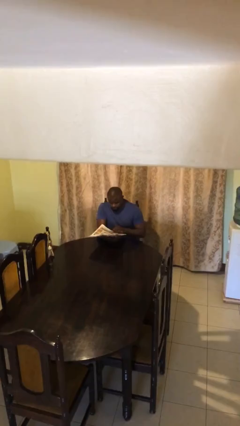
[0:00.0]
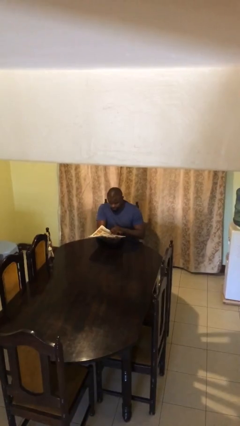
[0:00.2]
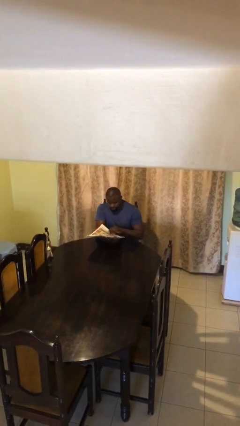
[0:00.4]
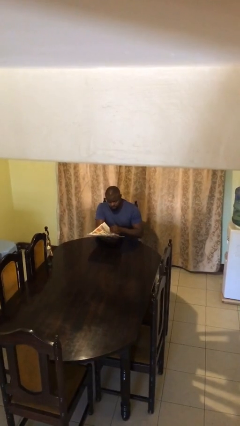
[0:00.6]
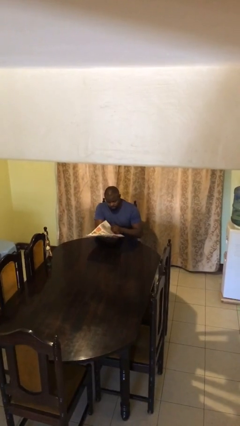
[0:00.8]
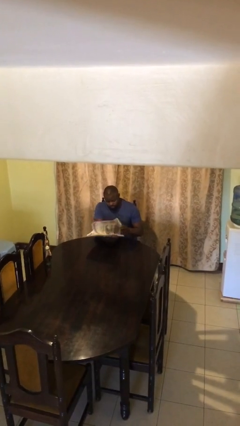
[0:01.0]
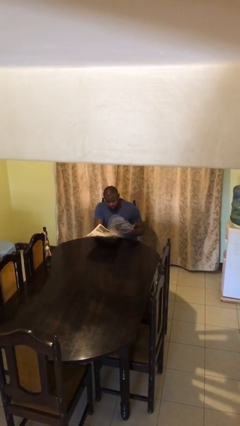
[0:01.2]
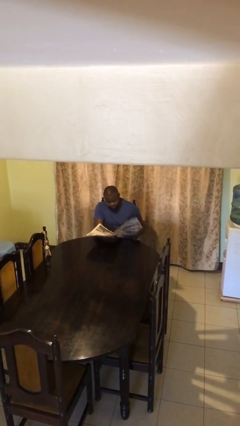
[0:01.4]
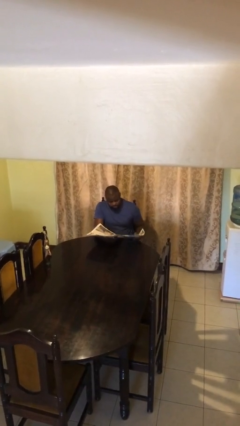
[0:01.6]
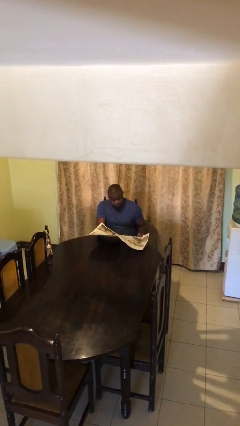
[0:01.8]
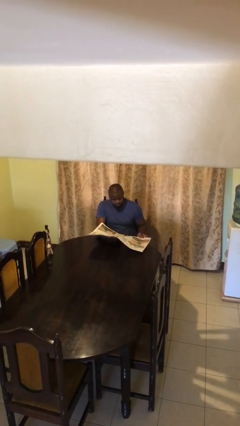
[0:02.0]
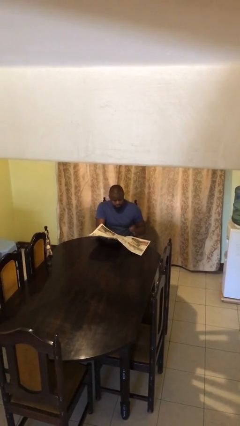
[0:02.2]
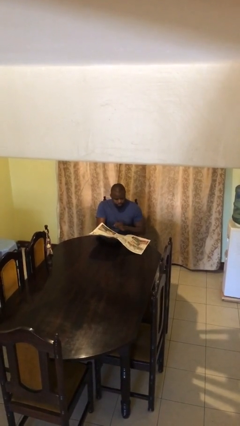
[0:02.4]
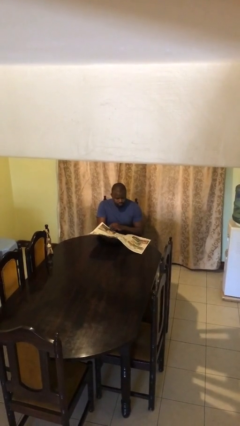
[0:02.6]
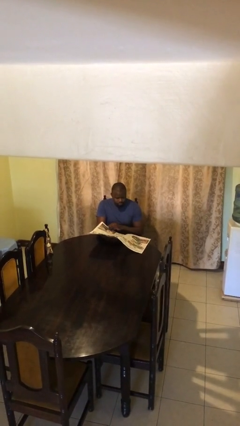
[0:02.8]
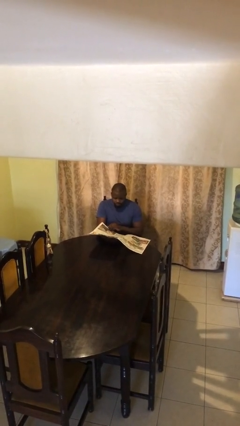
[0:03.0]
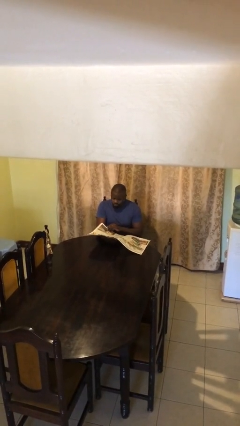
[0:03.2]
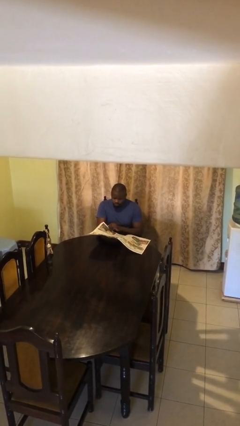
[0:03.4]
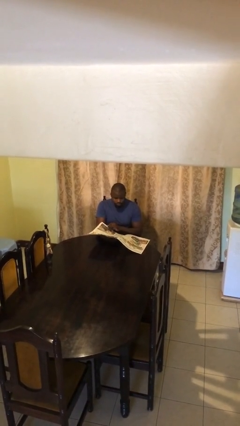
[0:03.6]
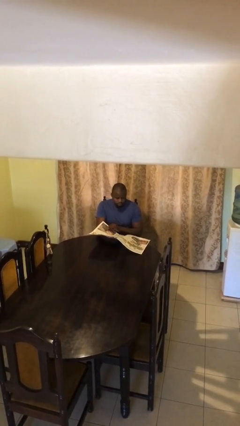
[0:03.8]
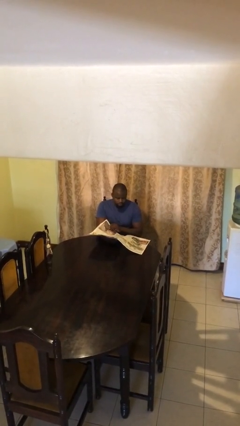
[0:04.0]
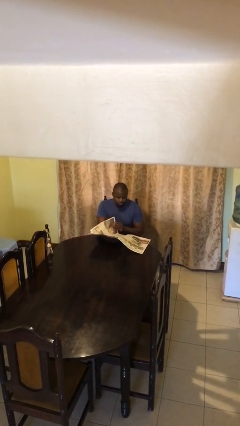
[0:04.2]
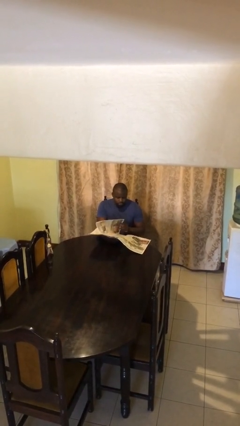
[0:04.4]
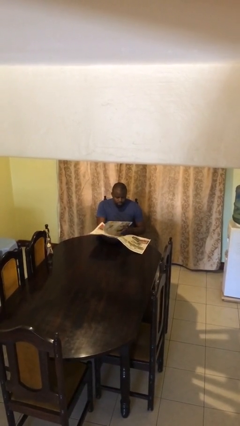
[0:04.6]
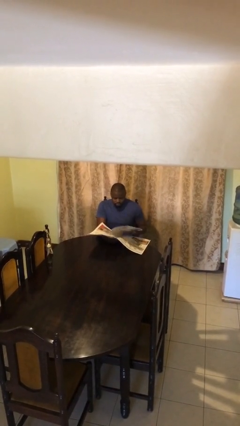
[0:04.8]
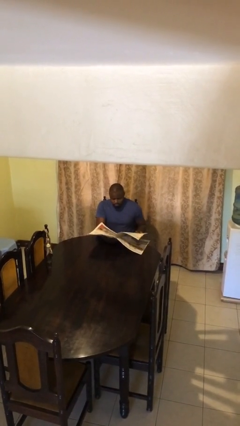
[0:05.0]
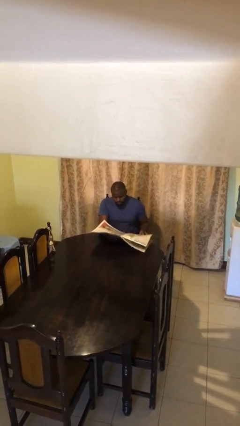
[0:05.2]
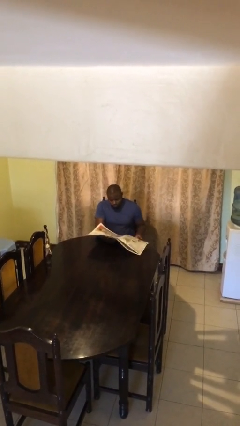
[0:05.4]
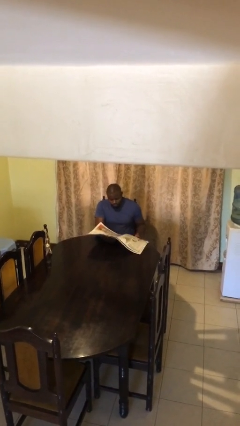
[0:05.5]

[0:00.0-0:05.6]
person reads document

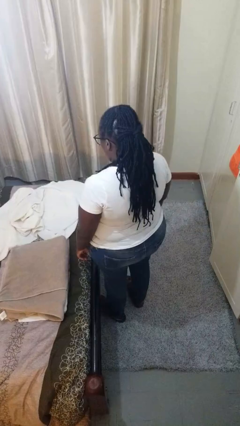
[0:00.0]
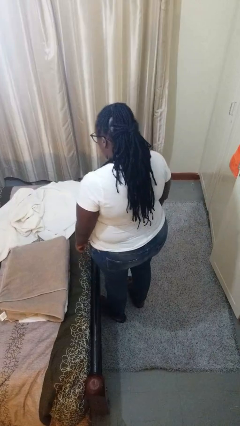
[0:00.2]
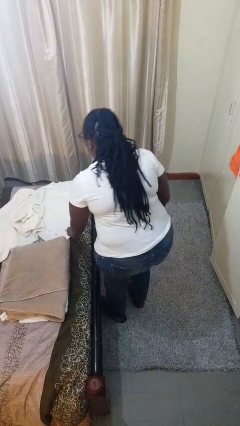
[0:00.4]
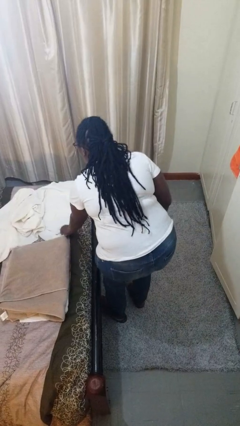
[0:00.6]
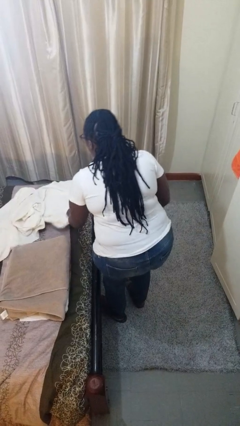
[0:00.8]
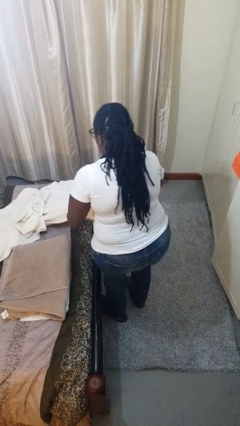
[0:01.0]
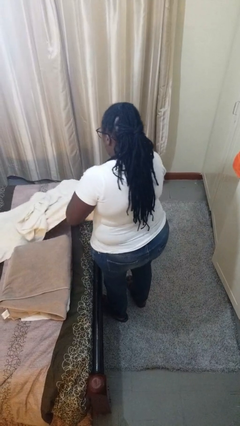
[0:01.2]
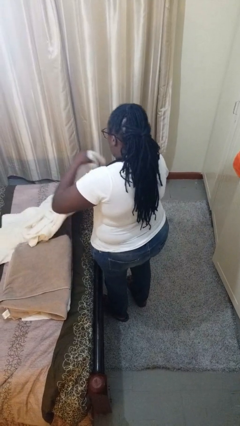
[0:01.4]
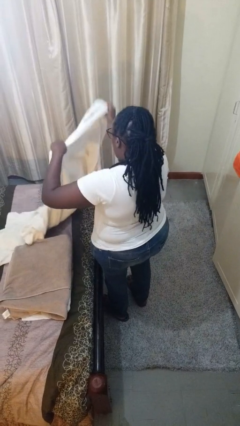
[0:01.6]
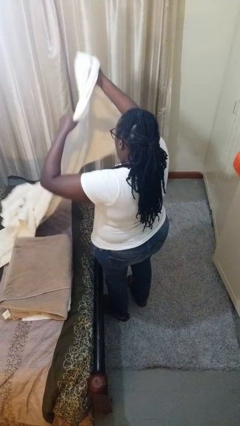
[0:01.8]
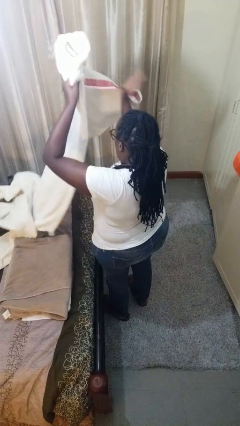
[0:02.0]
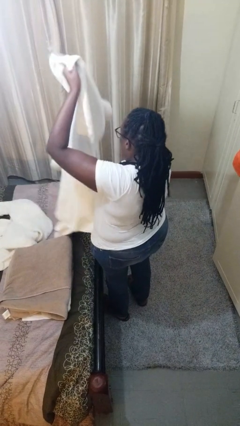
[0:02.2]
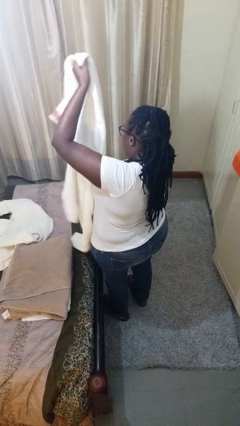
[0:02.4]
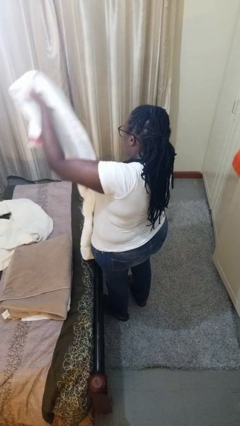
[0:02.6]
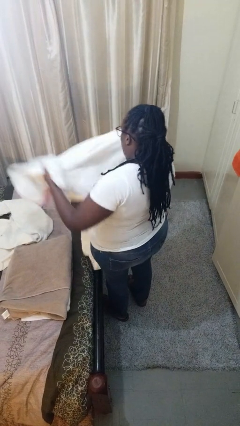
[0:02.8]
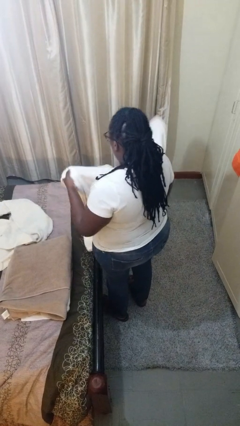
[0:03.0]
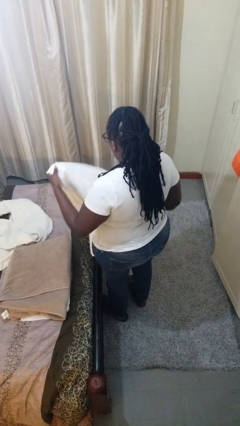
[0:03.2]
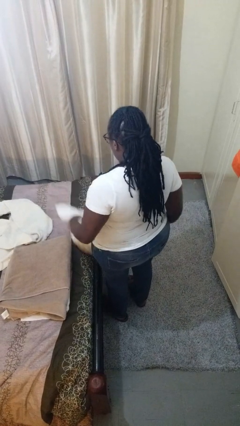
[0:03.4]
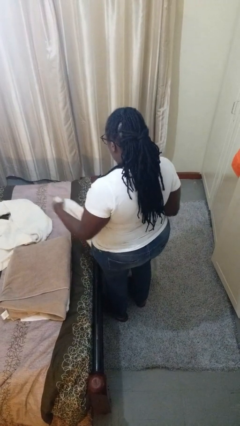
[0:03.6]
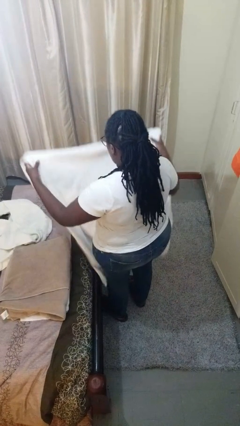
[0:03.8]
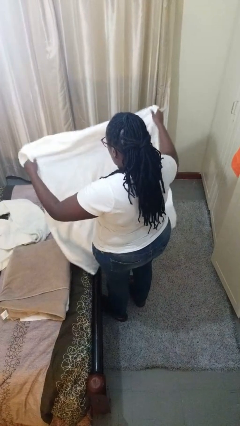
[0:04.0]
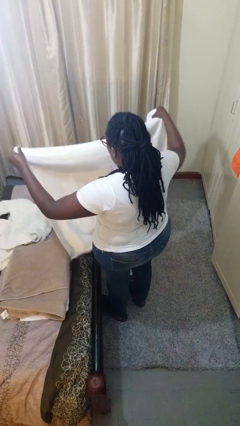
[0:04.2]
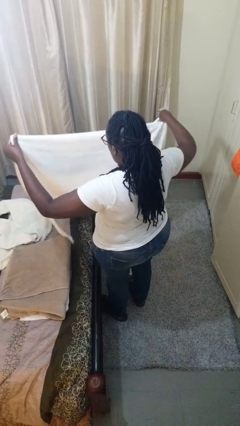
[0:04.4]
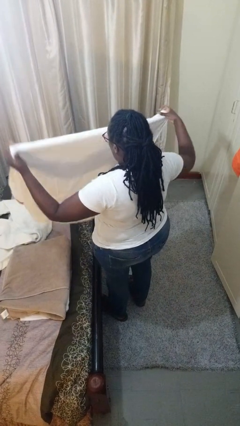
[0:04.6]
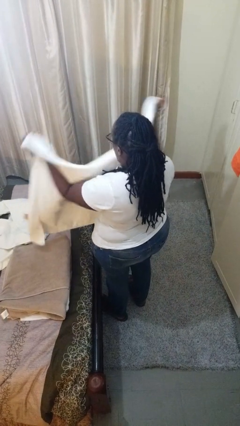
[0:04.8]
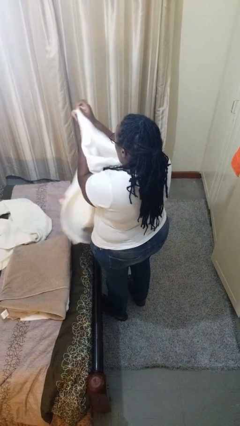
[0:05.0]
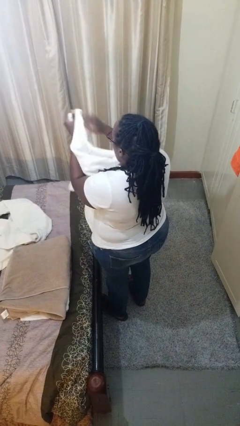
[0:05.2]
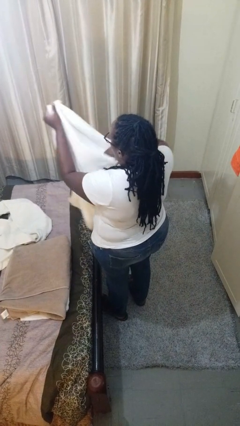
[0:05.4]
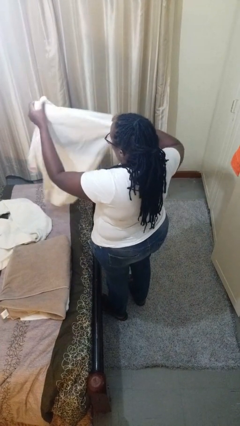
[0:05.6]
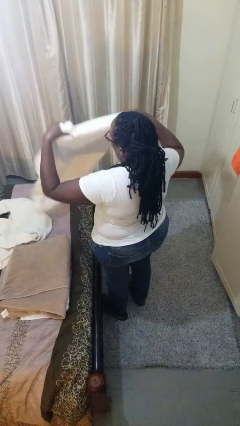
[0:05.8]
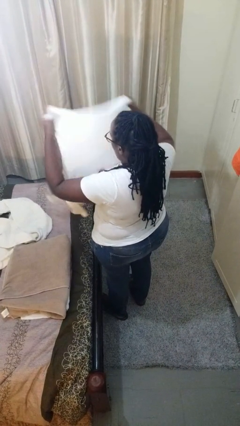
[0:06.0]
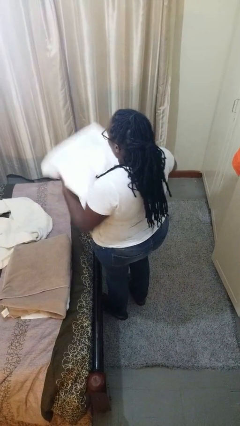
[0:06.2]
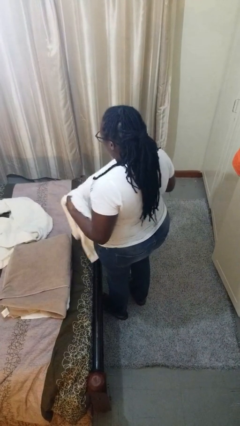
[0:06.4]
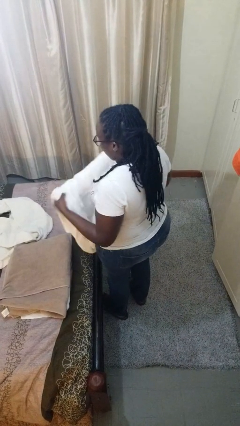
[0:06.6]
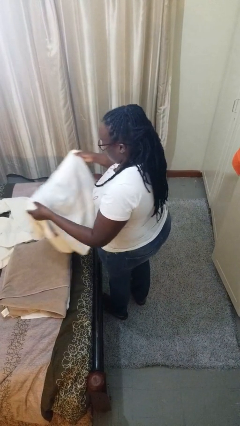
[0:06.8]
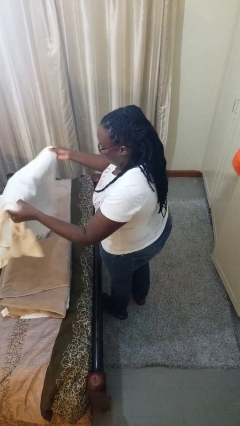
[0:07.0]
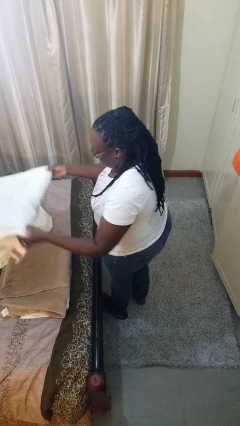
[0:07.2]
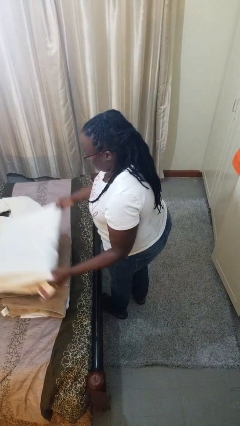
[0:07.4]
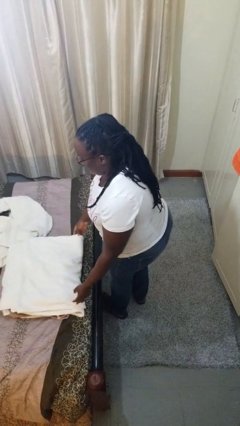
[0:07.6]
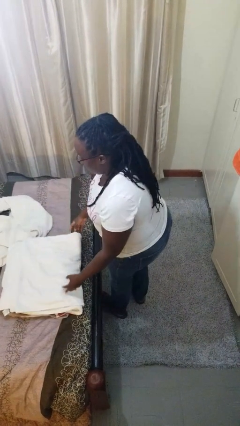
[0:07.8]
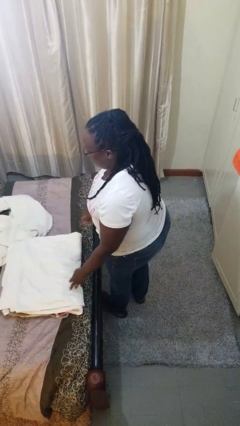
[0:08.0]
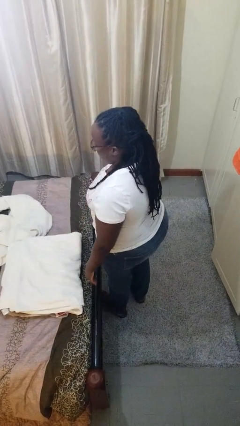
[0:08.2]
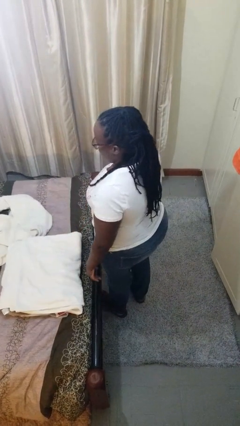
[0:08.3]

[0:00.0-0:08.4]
person folds towel

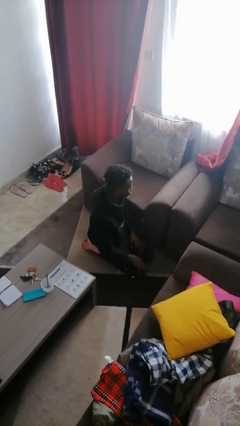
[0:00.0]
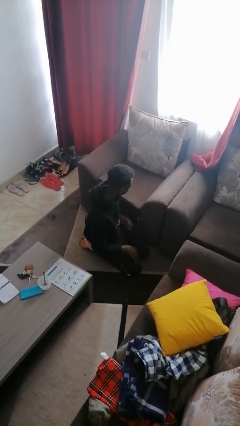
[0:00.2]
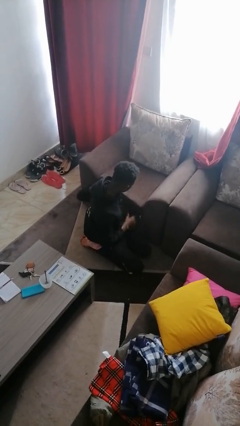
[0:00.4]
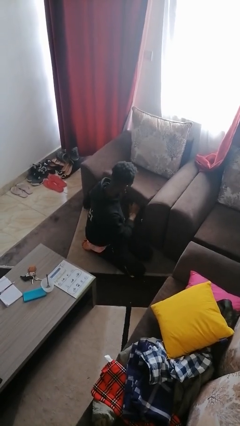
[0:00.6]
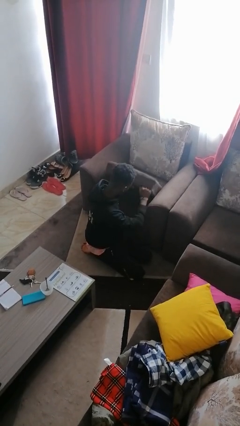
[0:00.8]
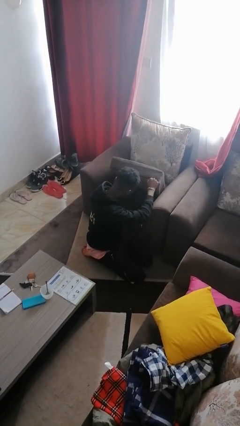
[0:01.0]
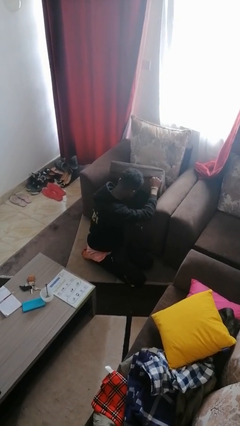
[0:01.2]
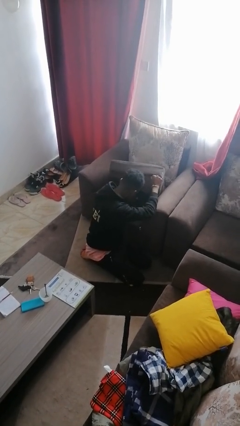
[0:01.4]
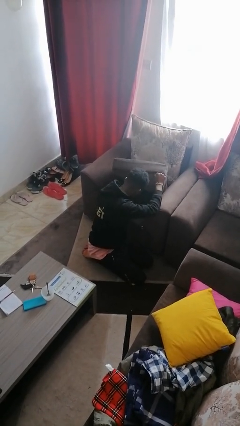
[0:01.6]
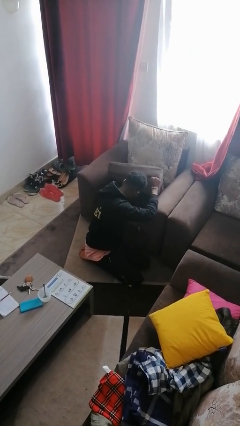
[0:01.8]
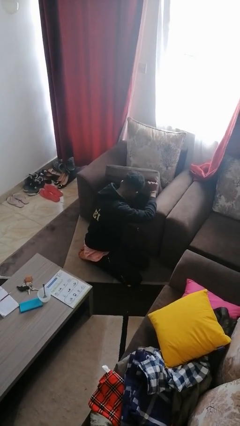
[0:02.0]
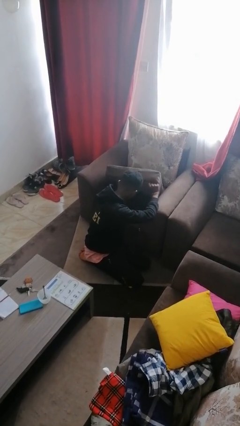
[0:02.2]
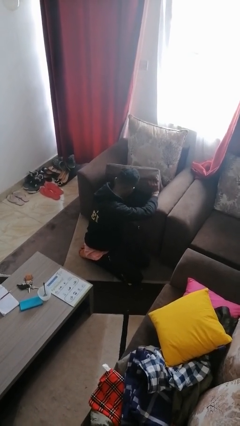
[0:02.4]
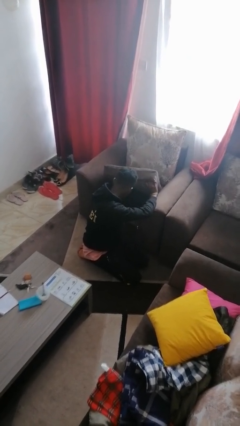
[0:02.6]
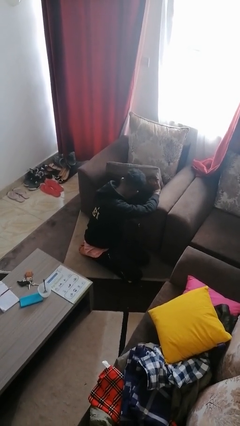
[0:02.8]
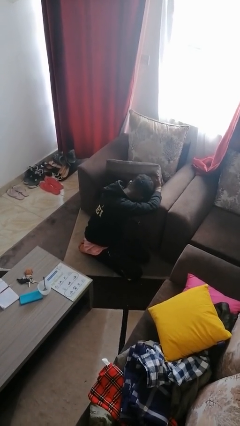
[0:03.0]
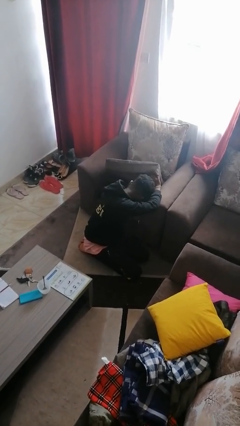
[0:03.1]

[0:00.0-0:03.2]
person searches in couch

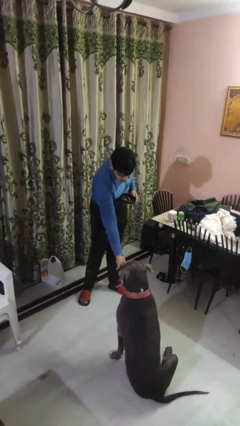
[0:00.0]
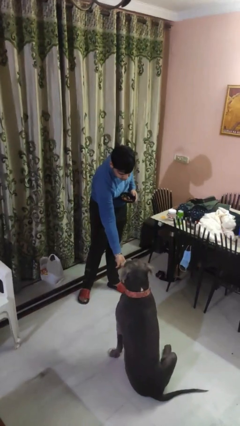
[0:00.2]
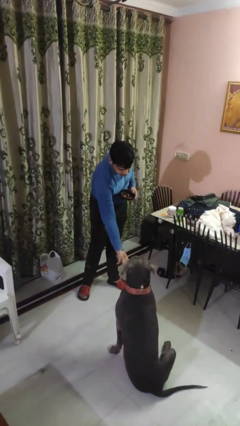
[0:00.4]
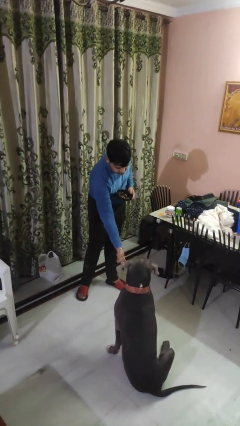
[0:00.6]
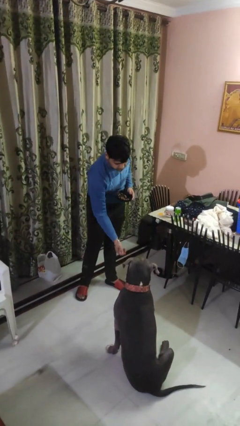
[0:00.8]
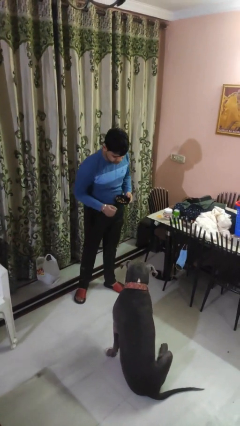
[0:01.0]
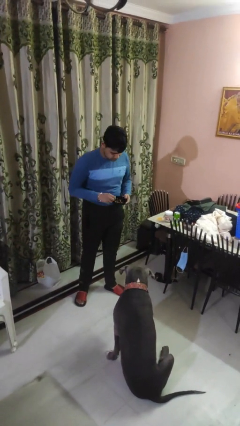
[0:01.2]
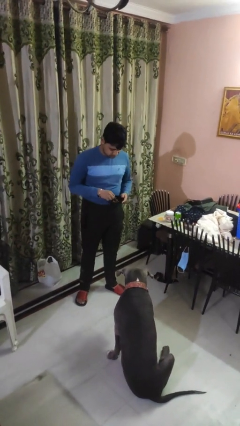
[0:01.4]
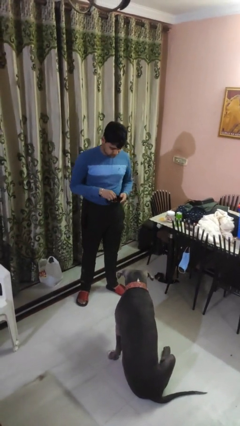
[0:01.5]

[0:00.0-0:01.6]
person feeds dog
